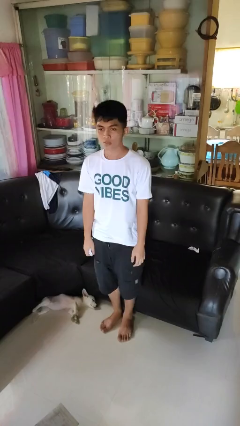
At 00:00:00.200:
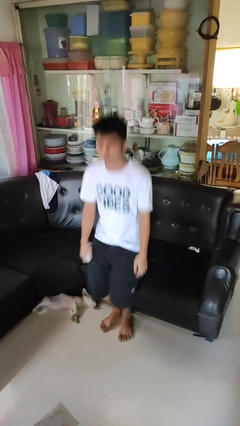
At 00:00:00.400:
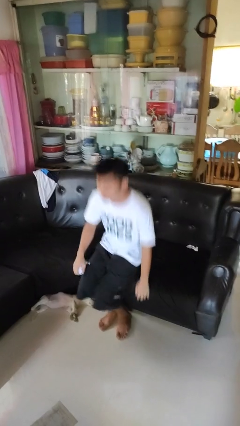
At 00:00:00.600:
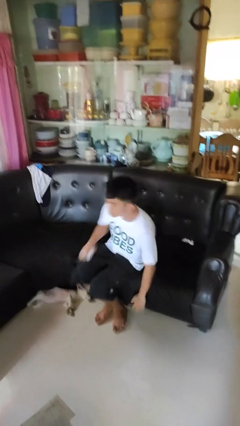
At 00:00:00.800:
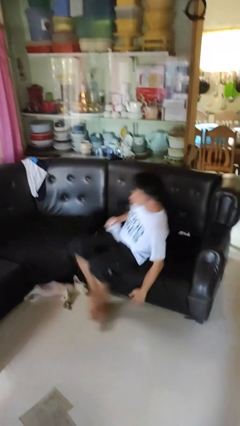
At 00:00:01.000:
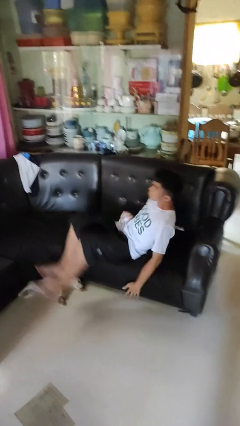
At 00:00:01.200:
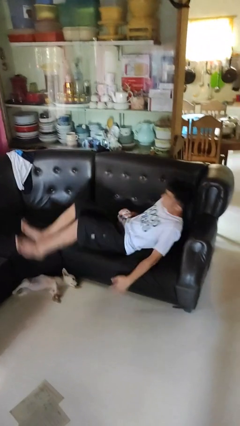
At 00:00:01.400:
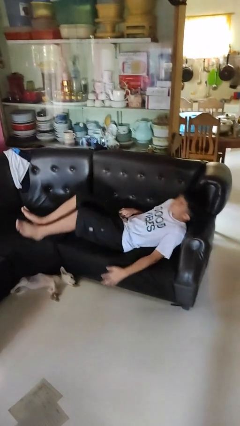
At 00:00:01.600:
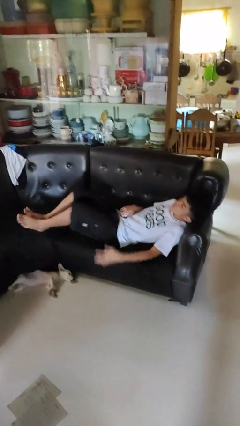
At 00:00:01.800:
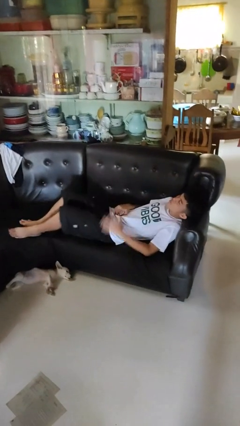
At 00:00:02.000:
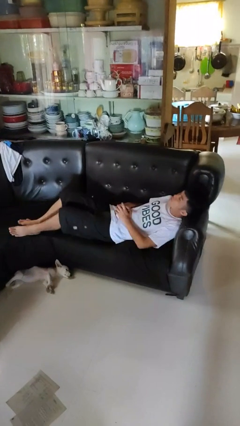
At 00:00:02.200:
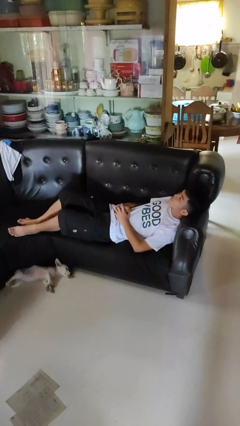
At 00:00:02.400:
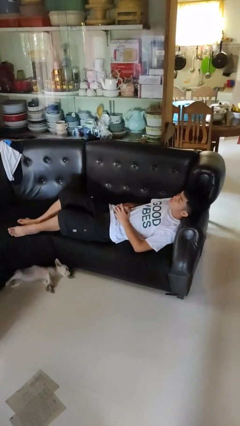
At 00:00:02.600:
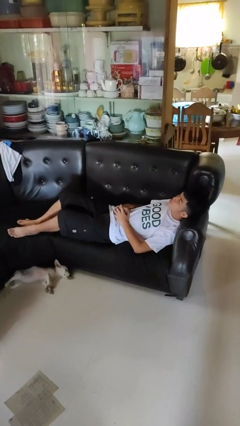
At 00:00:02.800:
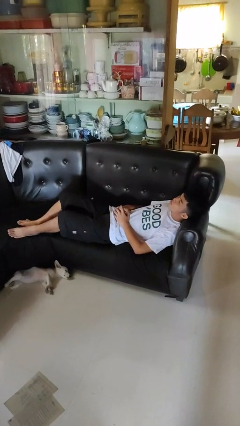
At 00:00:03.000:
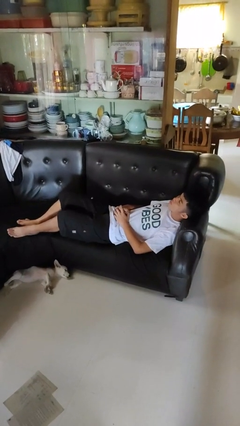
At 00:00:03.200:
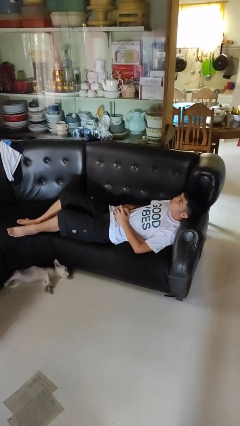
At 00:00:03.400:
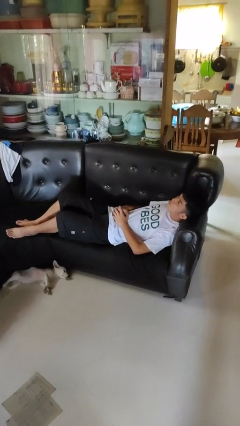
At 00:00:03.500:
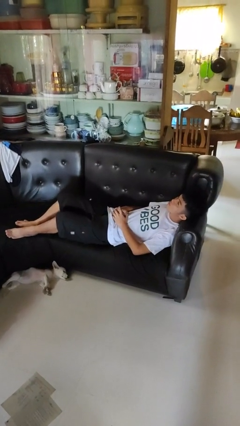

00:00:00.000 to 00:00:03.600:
person lies down on couch

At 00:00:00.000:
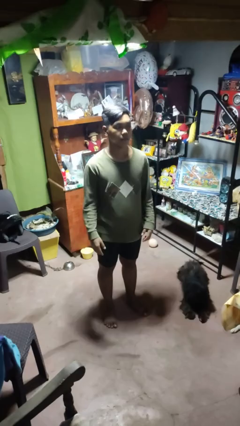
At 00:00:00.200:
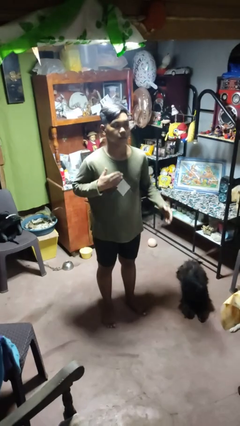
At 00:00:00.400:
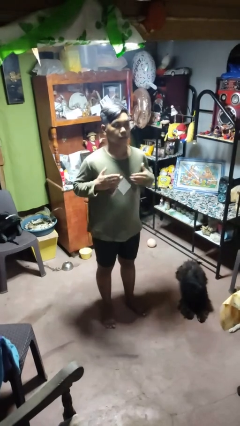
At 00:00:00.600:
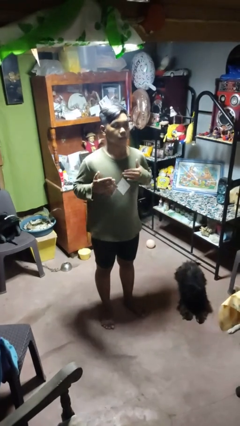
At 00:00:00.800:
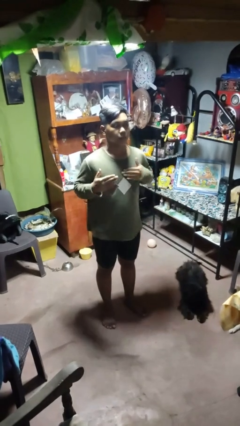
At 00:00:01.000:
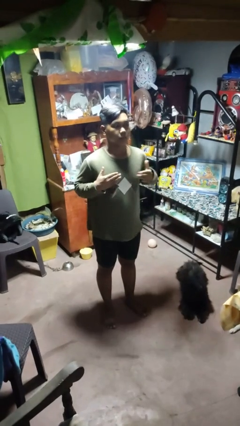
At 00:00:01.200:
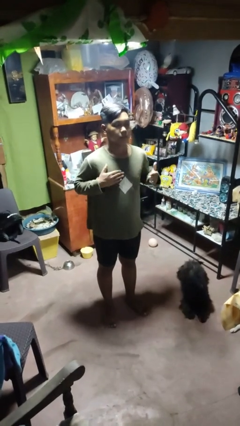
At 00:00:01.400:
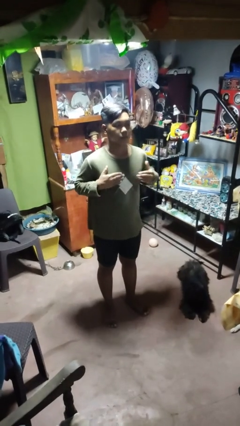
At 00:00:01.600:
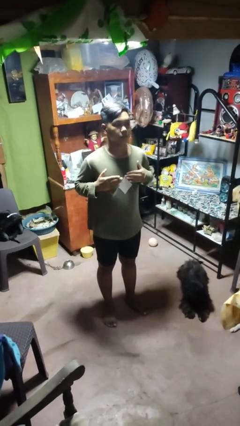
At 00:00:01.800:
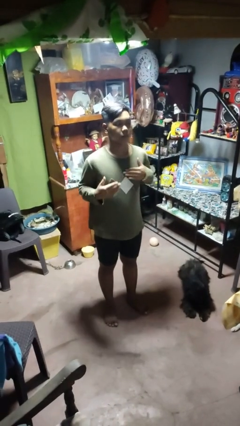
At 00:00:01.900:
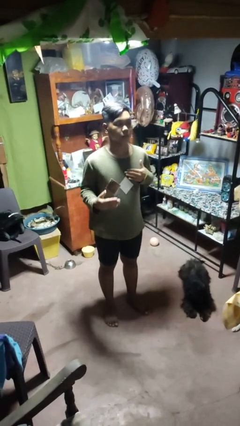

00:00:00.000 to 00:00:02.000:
person drums on chest

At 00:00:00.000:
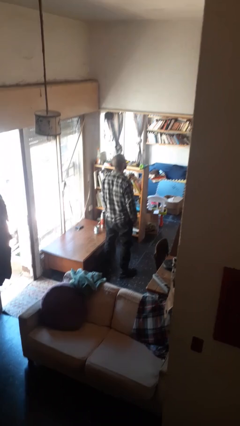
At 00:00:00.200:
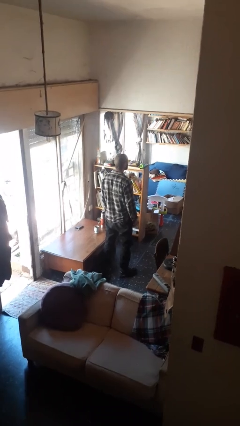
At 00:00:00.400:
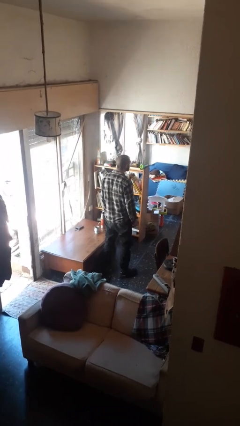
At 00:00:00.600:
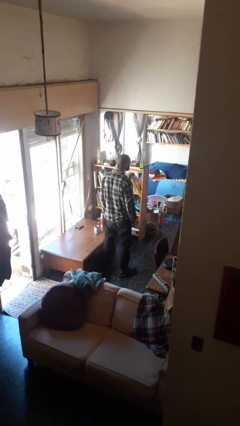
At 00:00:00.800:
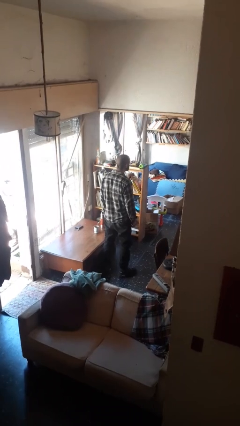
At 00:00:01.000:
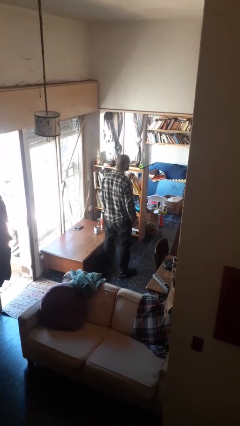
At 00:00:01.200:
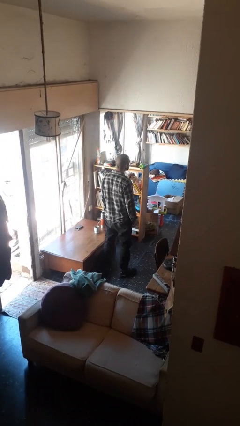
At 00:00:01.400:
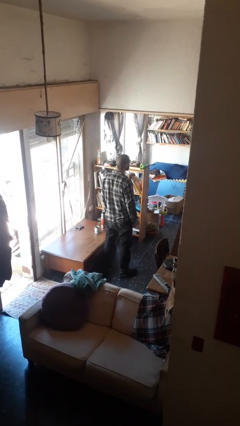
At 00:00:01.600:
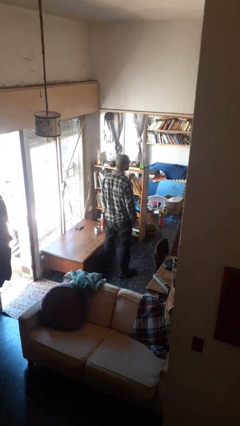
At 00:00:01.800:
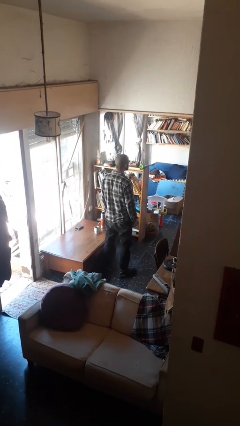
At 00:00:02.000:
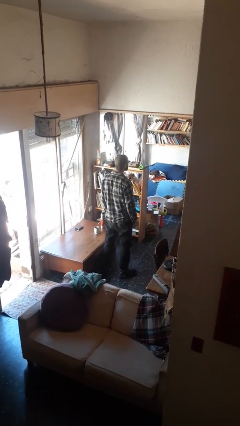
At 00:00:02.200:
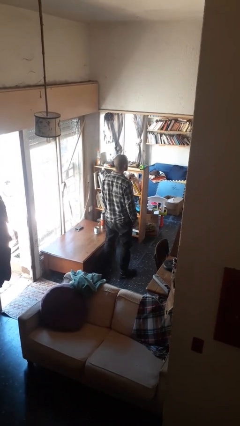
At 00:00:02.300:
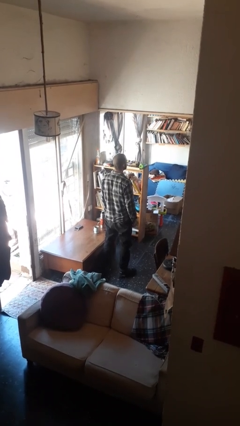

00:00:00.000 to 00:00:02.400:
person sticks out tongue

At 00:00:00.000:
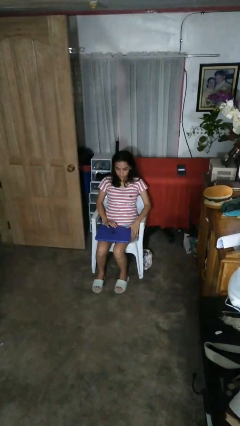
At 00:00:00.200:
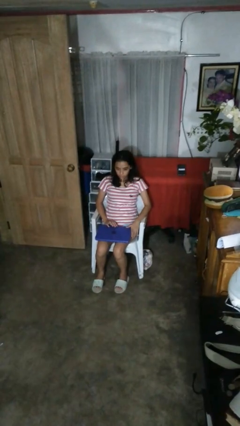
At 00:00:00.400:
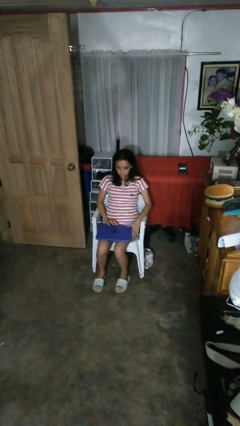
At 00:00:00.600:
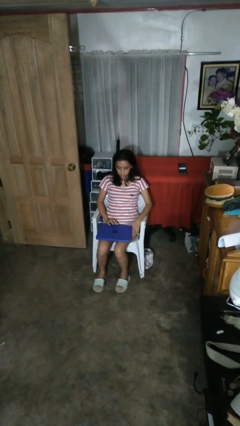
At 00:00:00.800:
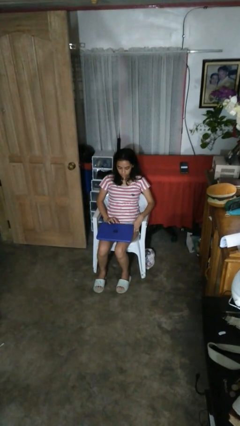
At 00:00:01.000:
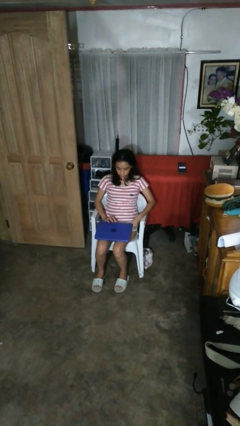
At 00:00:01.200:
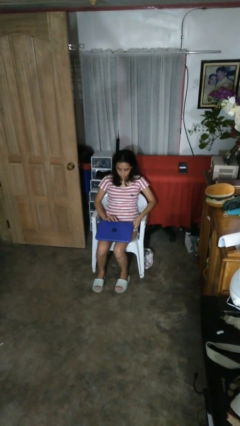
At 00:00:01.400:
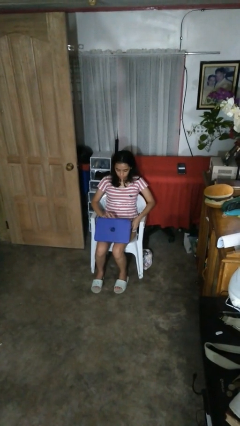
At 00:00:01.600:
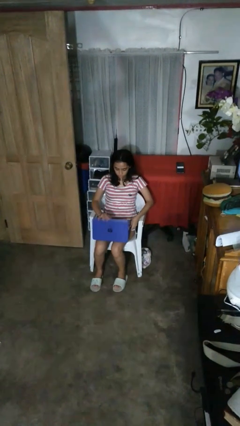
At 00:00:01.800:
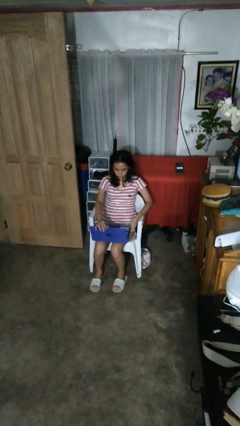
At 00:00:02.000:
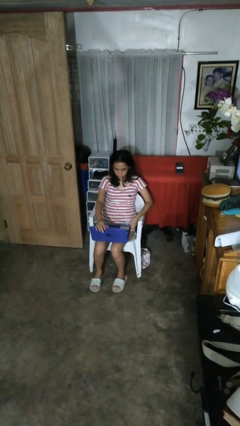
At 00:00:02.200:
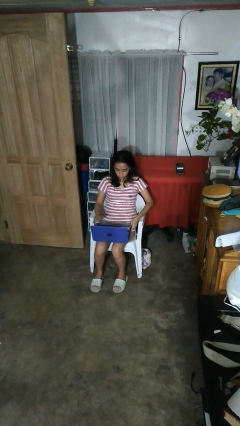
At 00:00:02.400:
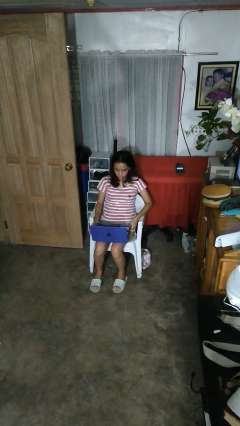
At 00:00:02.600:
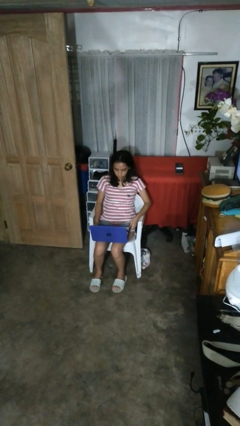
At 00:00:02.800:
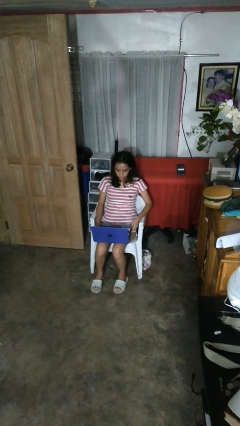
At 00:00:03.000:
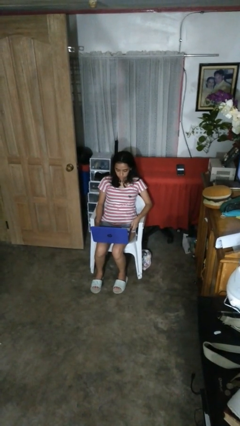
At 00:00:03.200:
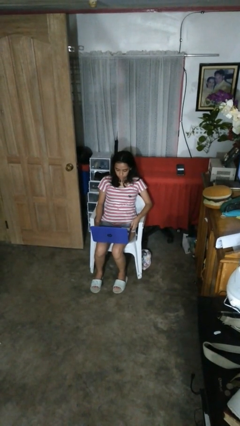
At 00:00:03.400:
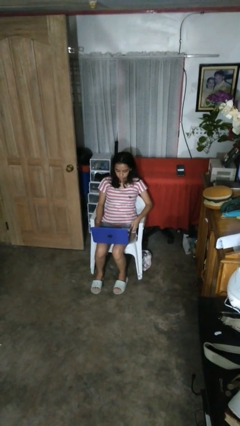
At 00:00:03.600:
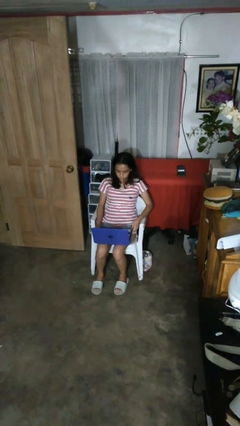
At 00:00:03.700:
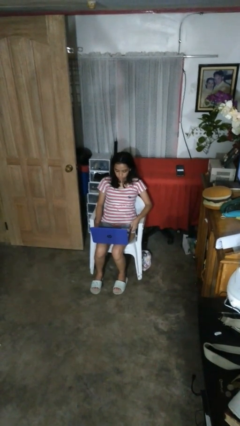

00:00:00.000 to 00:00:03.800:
person opens laptop

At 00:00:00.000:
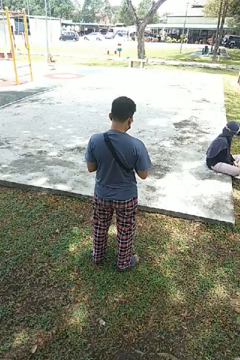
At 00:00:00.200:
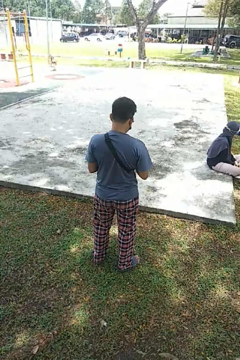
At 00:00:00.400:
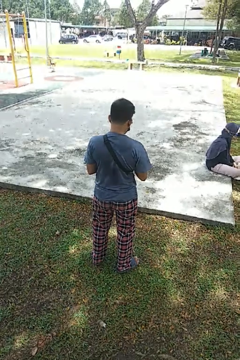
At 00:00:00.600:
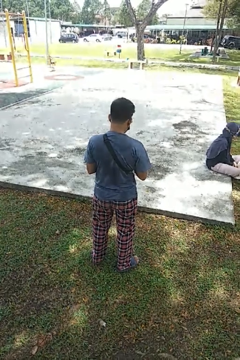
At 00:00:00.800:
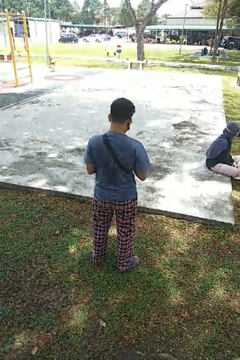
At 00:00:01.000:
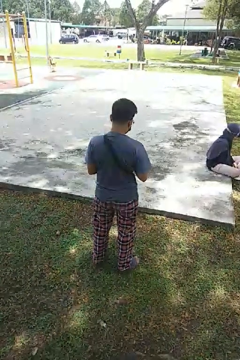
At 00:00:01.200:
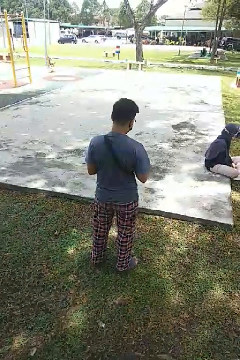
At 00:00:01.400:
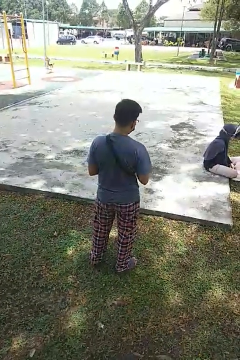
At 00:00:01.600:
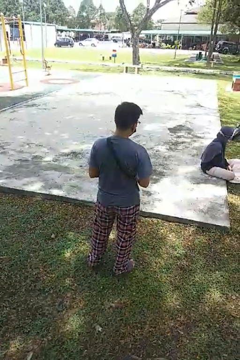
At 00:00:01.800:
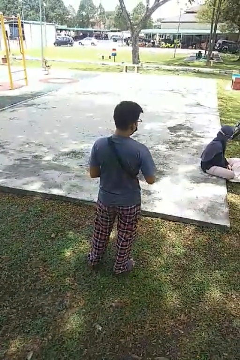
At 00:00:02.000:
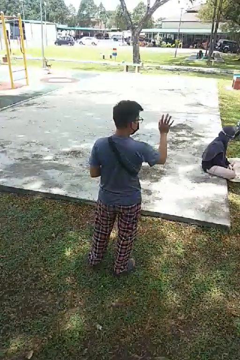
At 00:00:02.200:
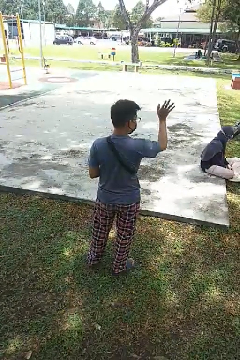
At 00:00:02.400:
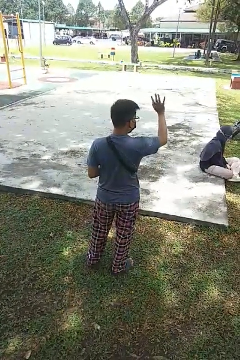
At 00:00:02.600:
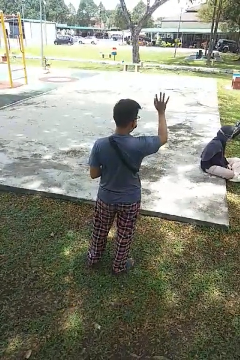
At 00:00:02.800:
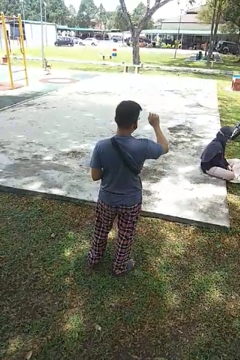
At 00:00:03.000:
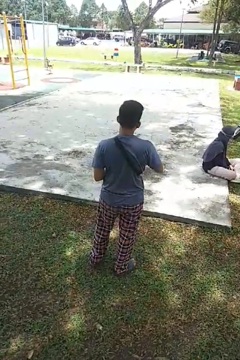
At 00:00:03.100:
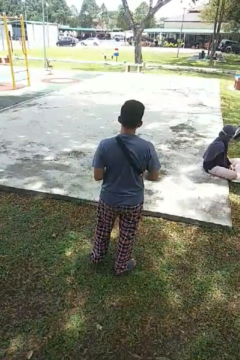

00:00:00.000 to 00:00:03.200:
person waves at person

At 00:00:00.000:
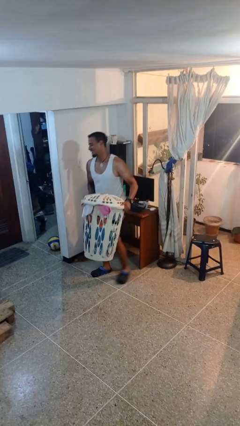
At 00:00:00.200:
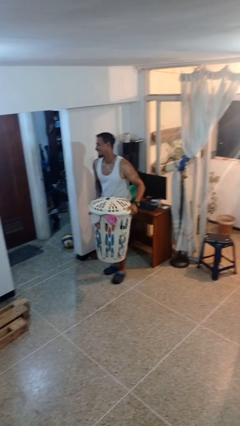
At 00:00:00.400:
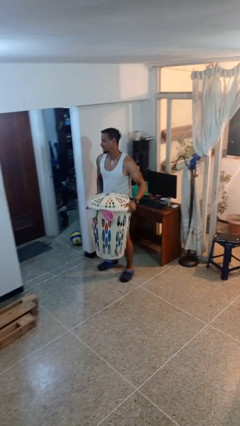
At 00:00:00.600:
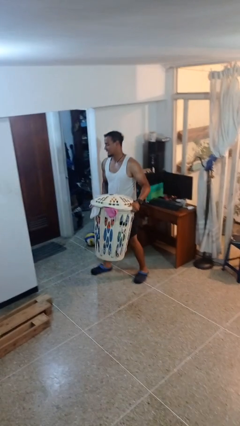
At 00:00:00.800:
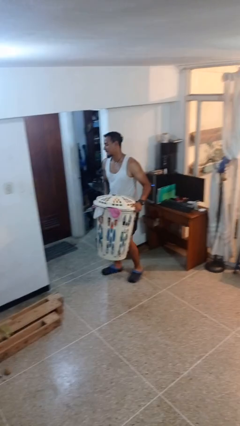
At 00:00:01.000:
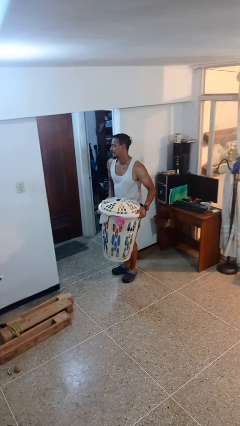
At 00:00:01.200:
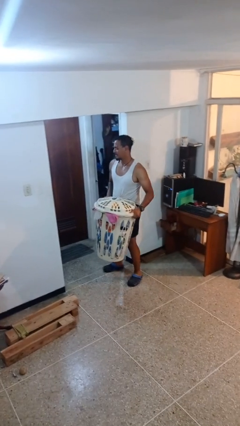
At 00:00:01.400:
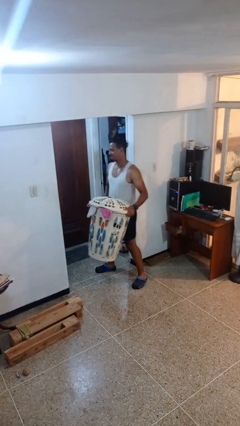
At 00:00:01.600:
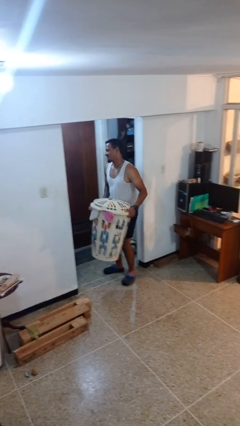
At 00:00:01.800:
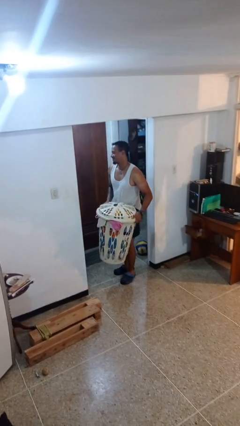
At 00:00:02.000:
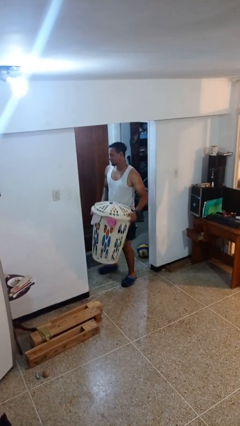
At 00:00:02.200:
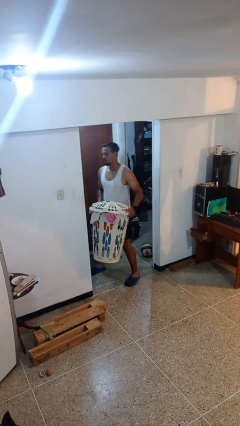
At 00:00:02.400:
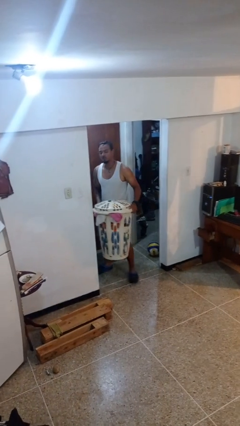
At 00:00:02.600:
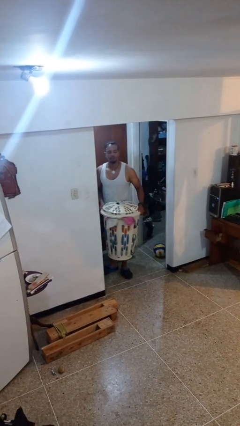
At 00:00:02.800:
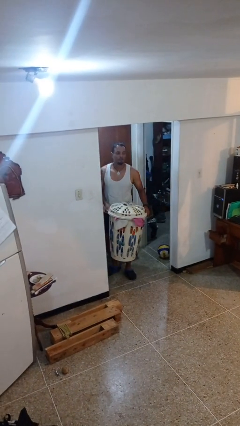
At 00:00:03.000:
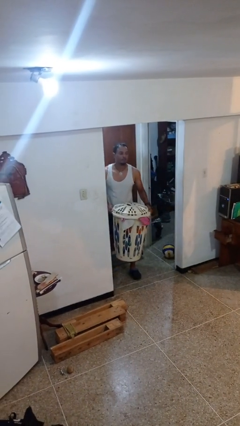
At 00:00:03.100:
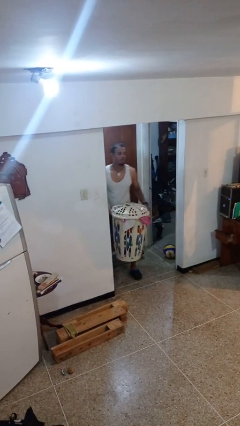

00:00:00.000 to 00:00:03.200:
person carries laundry basket
